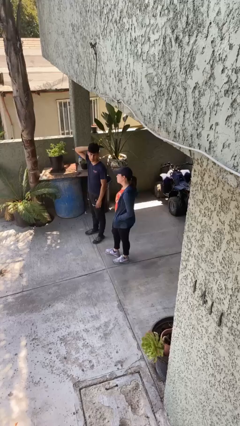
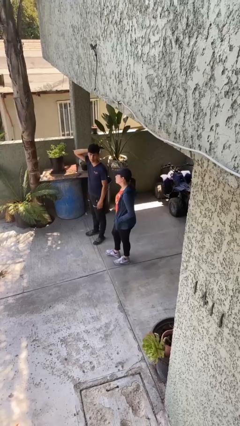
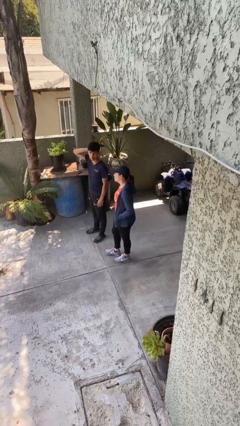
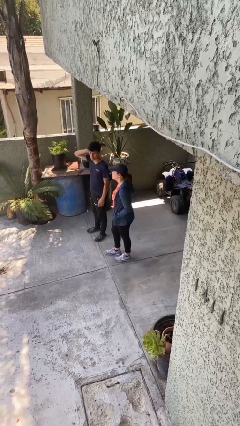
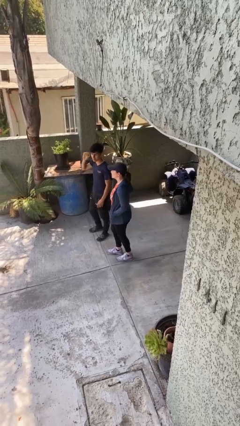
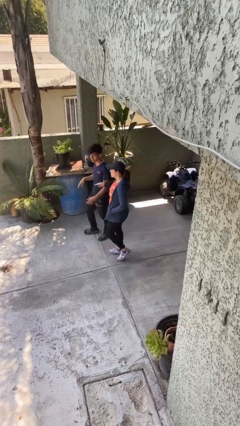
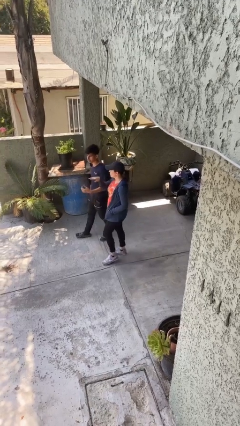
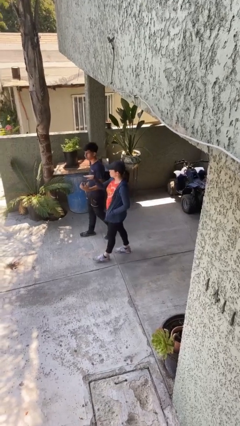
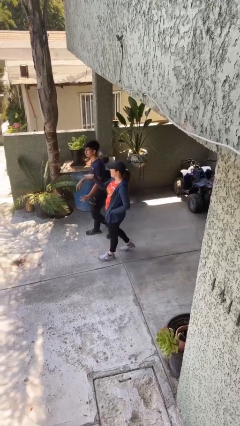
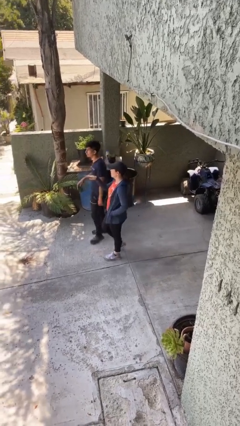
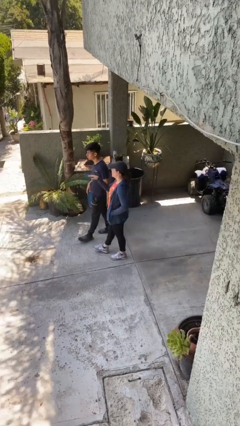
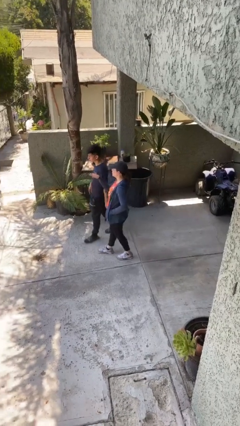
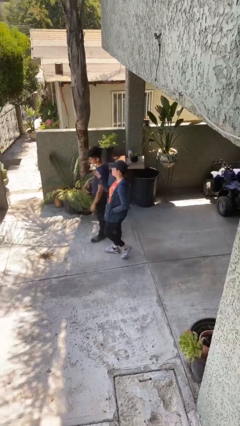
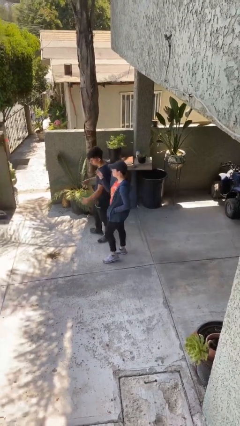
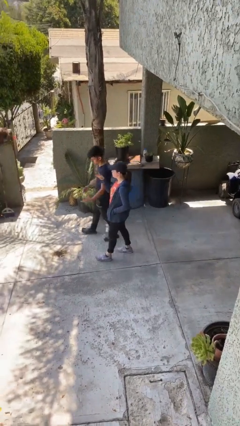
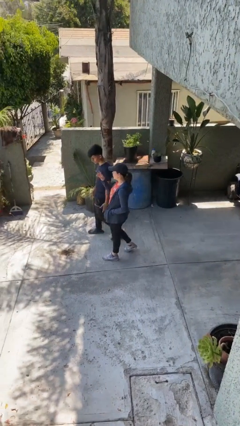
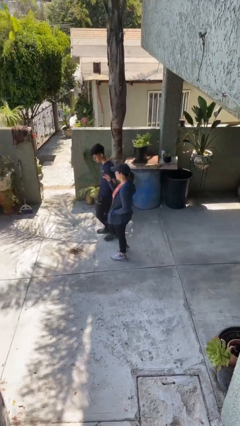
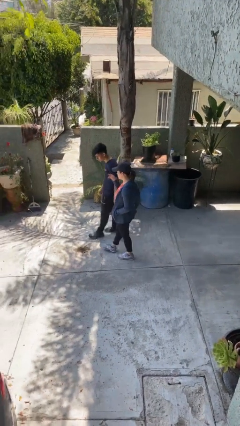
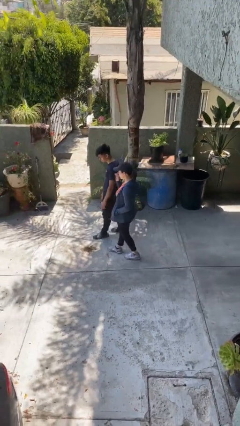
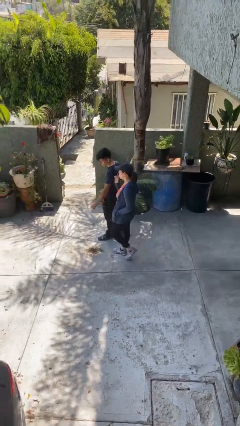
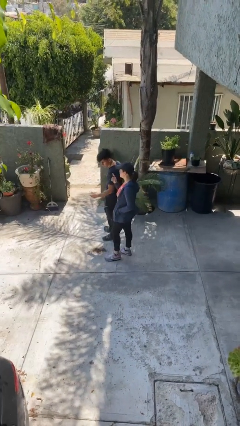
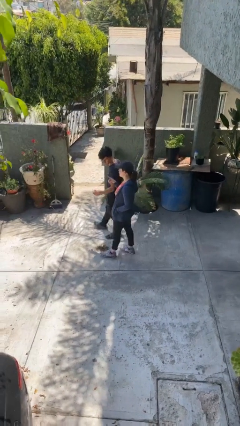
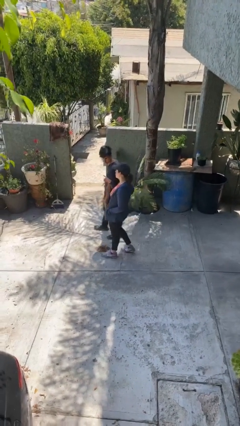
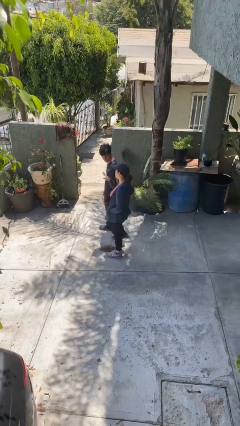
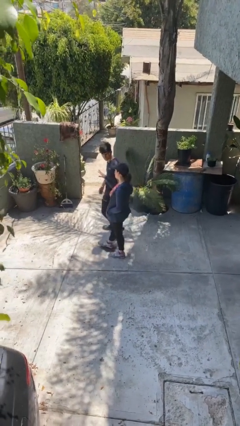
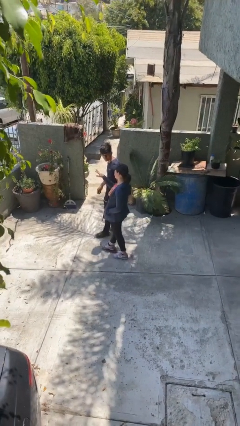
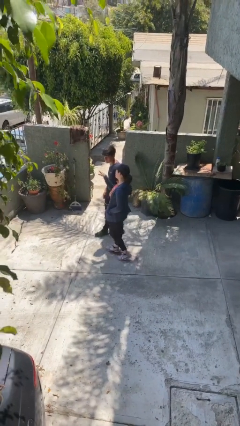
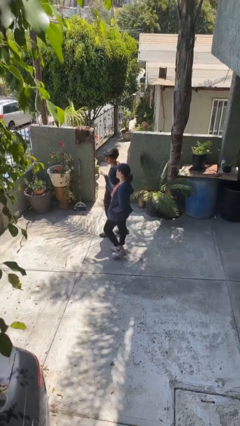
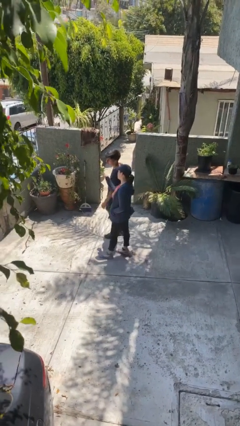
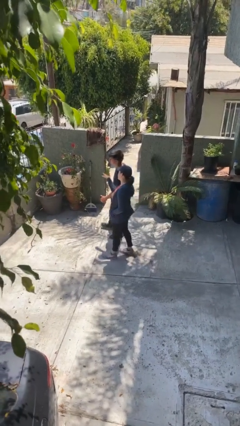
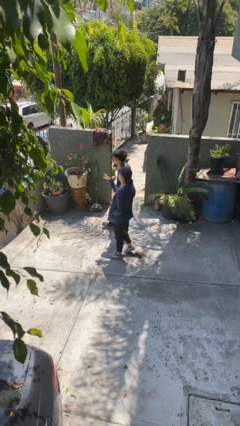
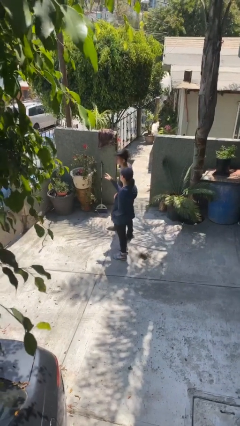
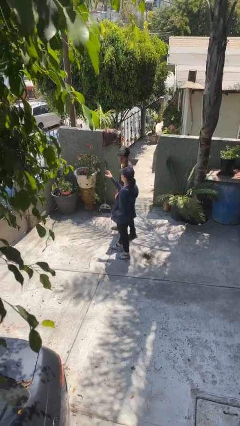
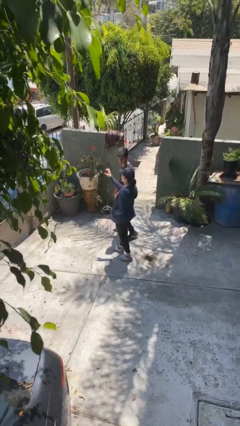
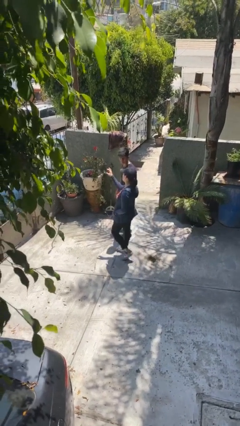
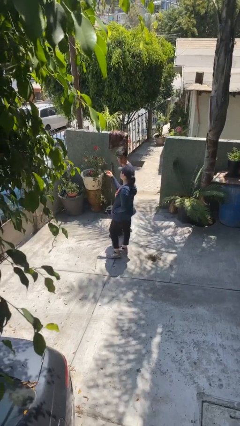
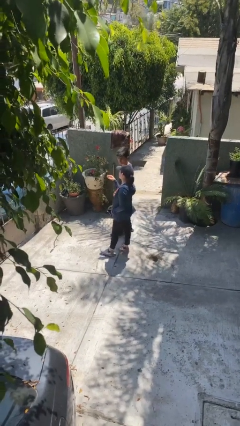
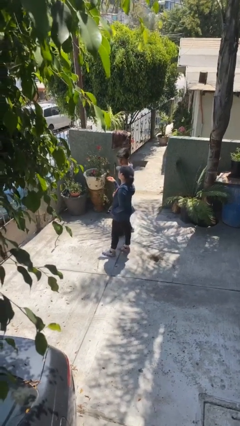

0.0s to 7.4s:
person talks to person

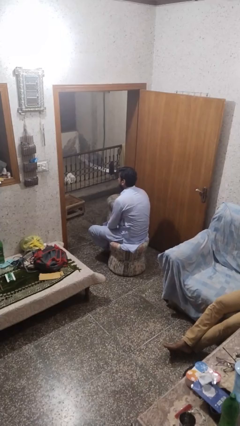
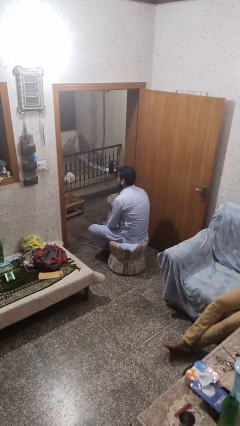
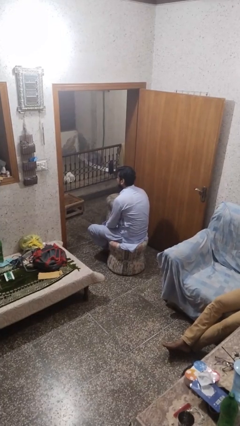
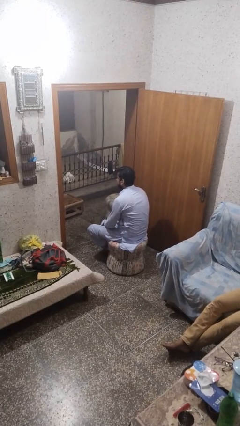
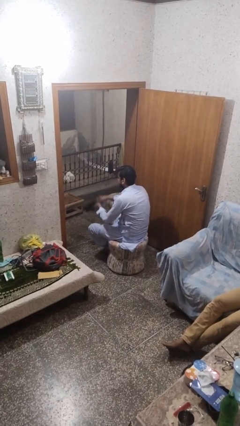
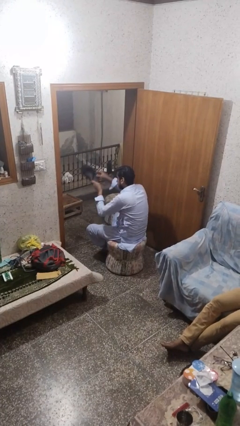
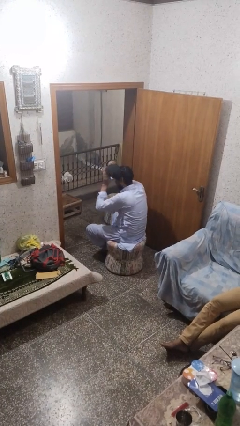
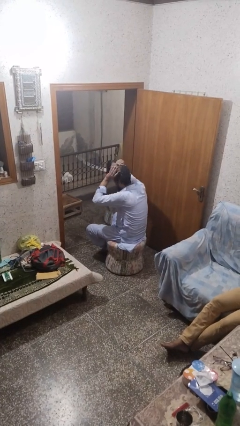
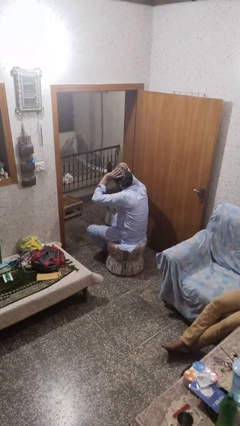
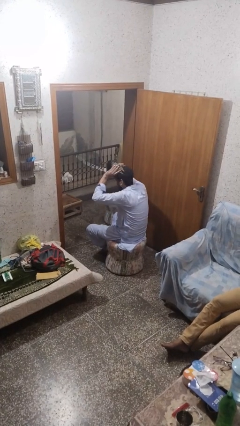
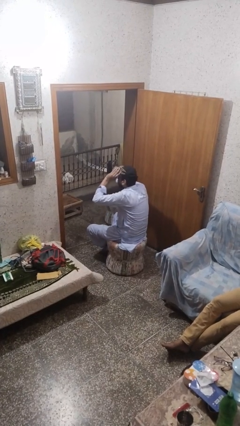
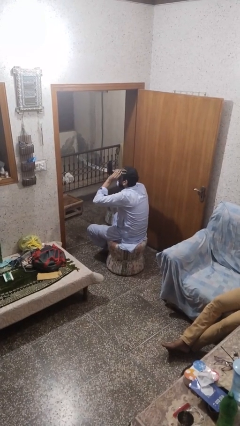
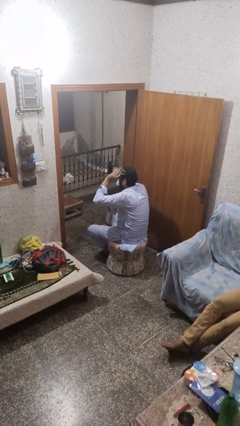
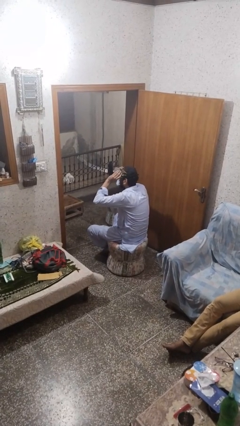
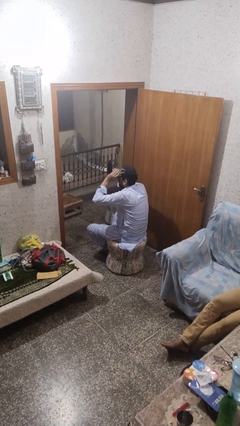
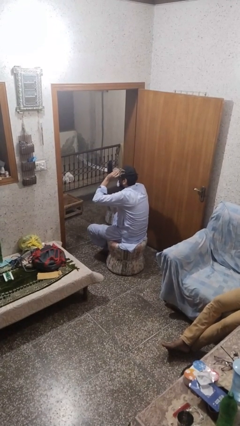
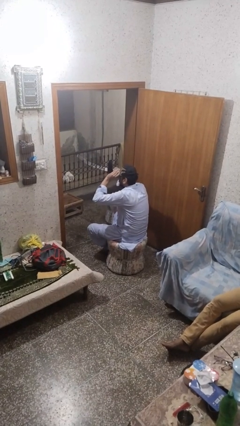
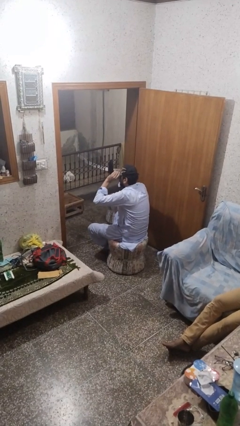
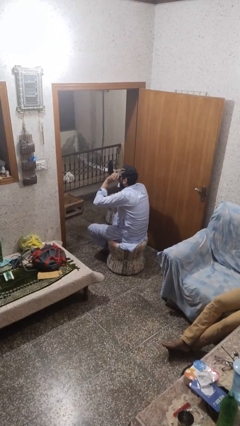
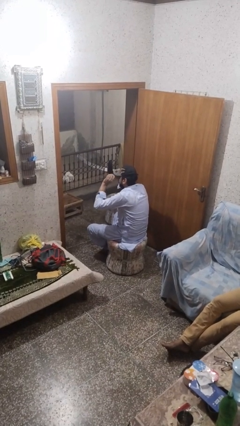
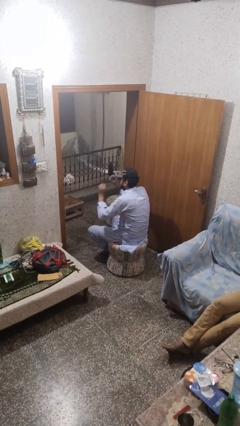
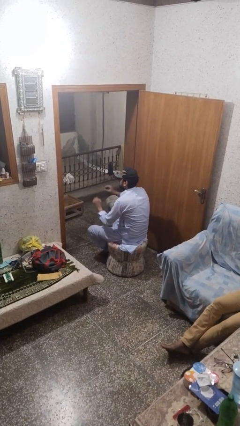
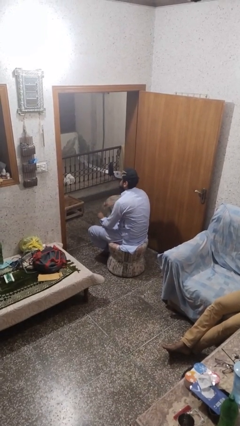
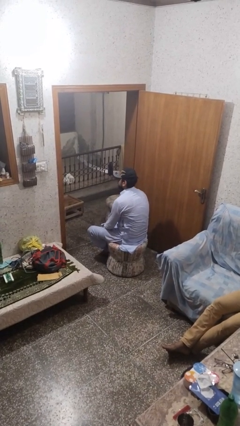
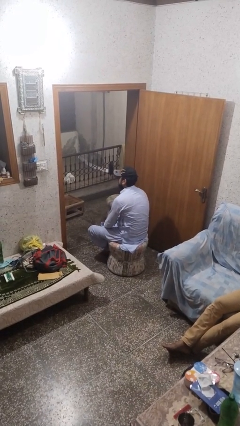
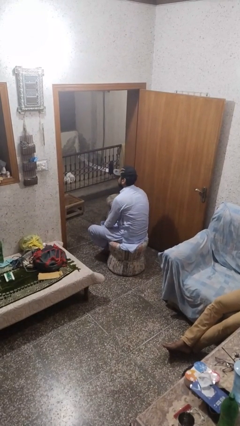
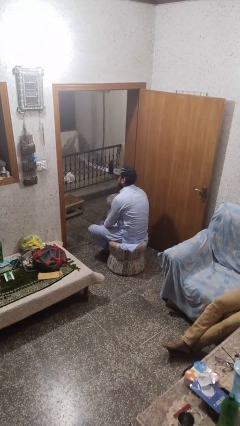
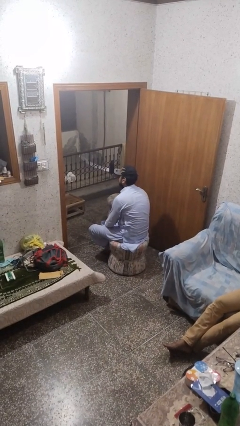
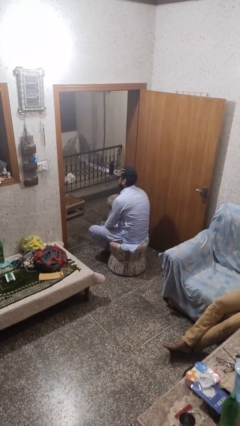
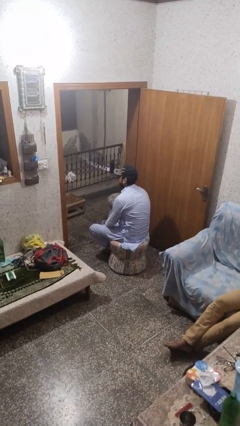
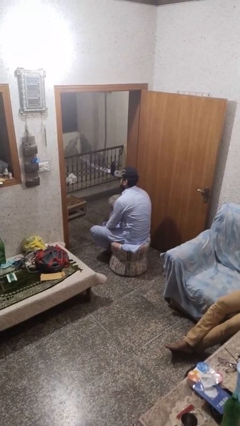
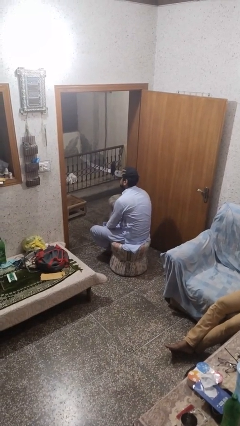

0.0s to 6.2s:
person puts on hat

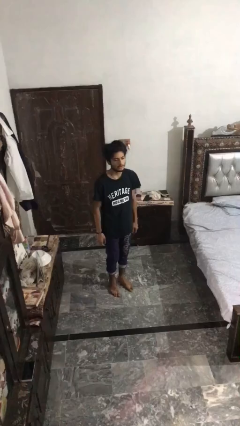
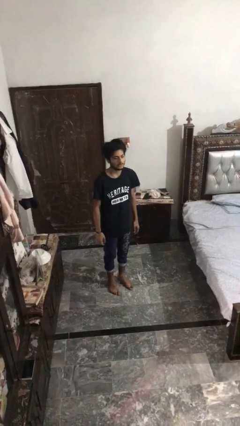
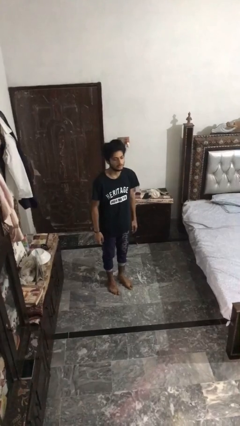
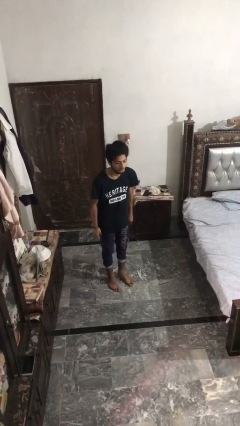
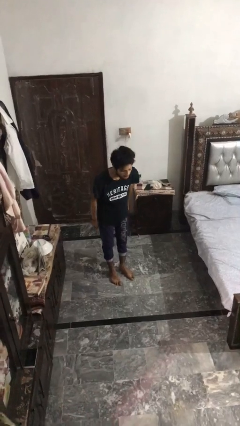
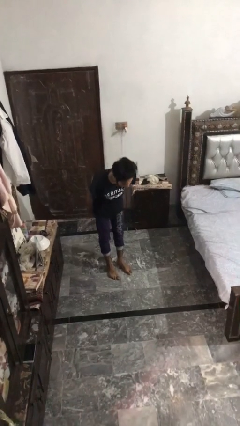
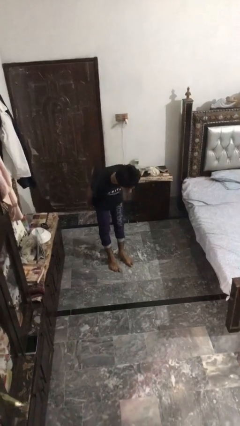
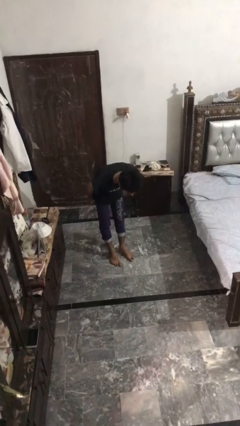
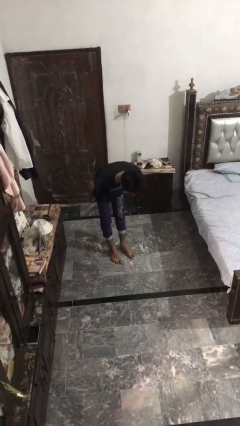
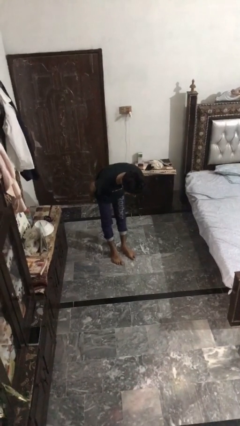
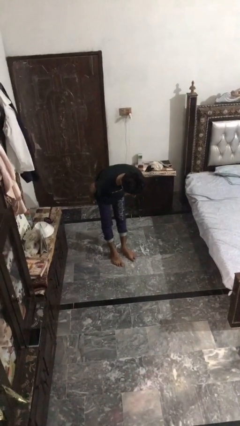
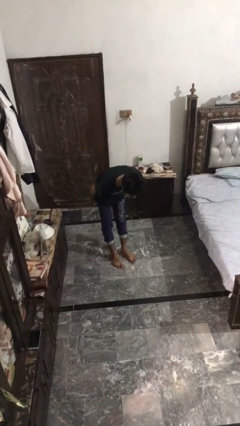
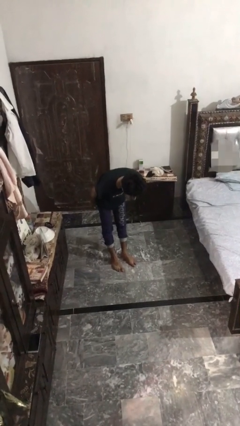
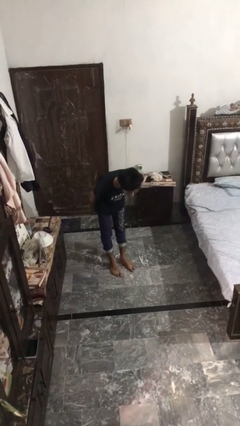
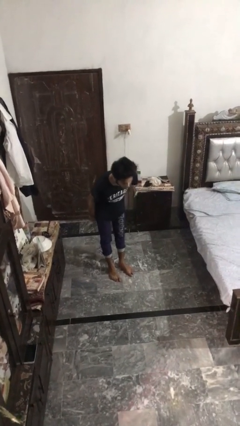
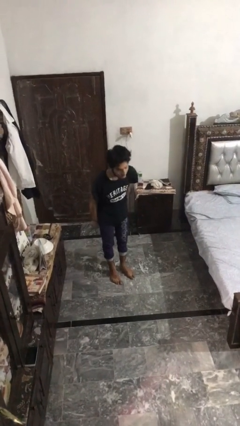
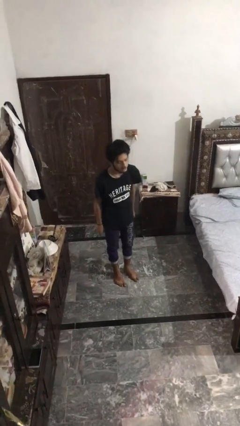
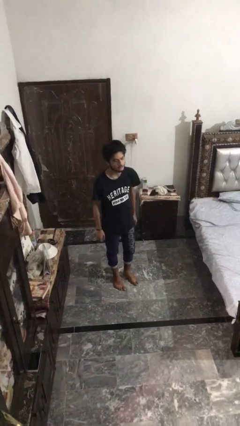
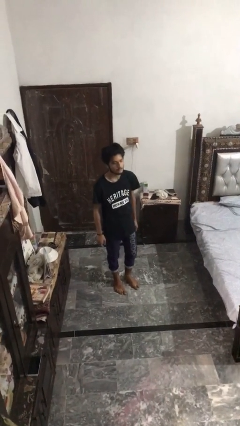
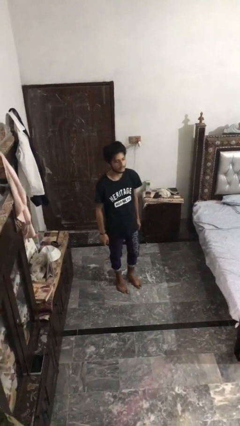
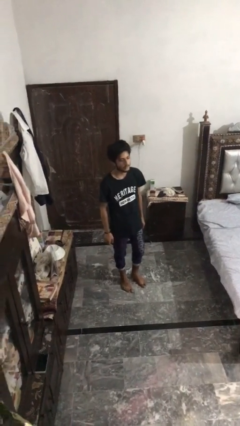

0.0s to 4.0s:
person bows

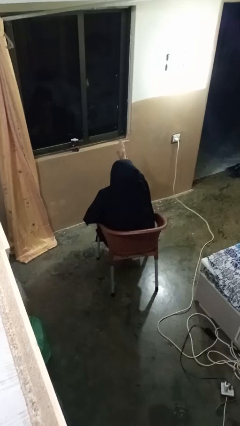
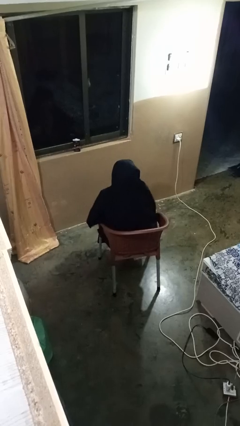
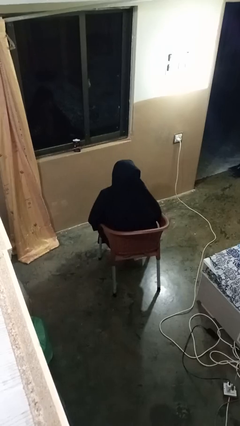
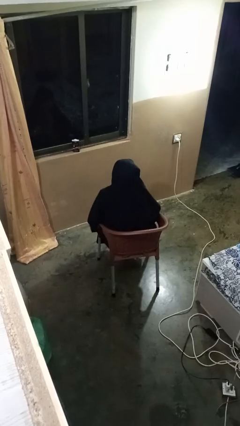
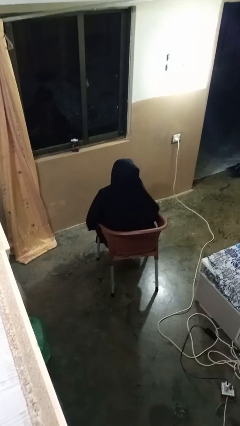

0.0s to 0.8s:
person gestures swipe down
